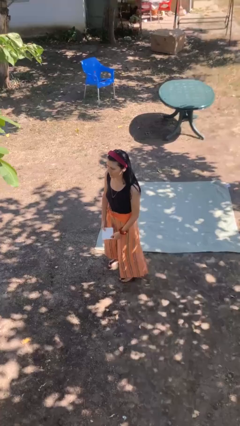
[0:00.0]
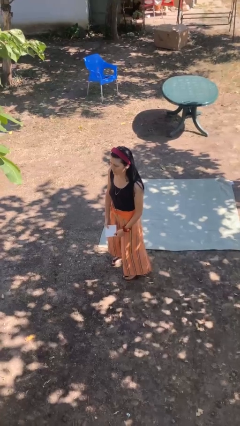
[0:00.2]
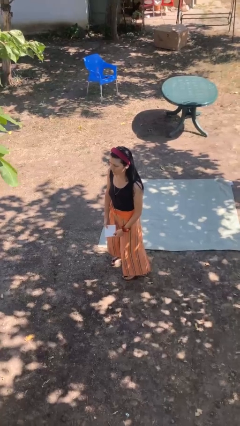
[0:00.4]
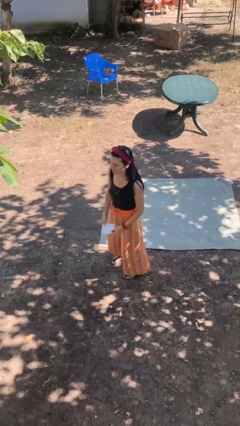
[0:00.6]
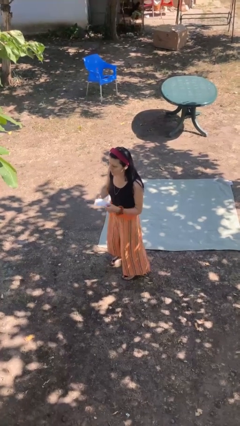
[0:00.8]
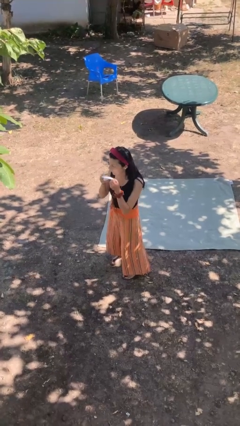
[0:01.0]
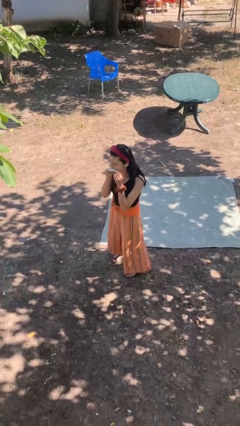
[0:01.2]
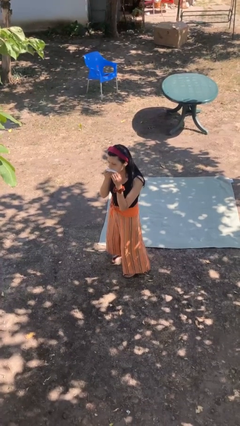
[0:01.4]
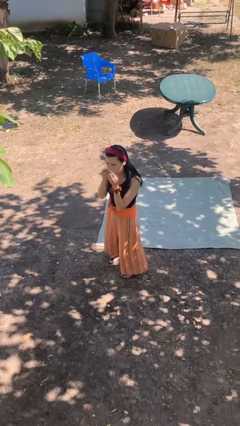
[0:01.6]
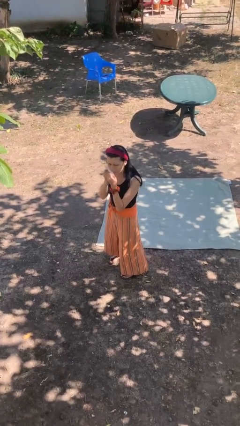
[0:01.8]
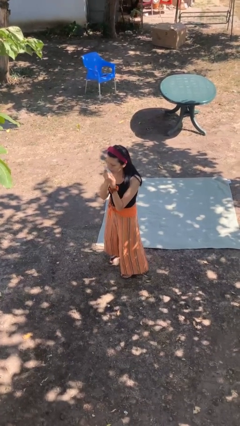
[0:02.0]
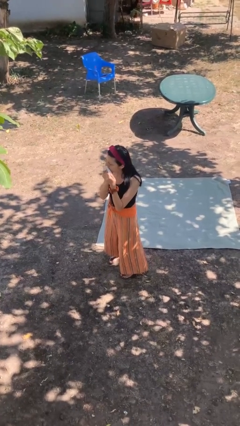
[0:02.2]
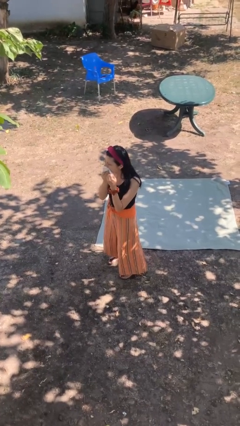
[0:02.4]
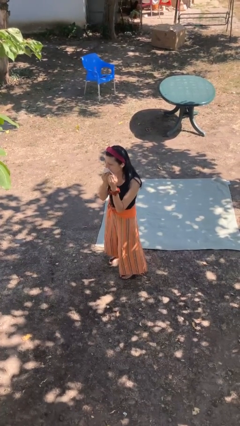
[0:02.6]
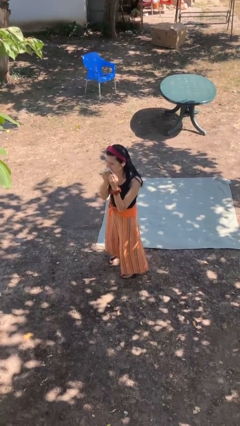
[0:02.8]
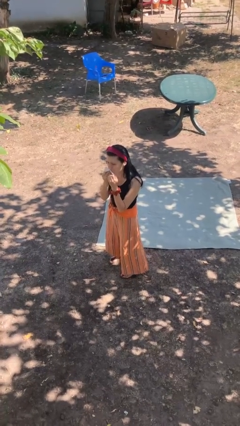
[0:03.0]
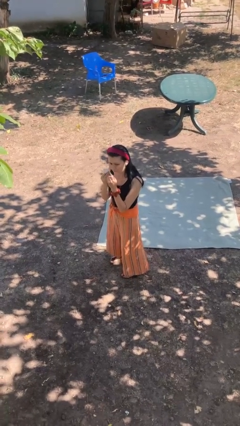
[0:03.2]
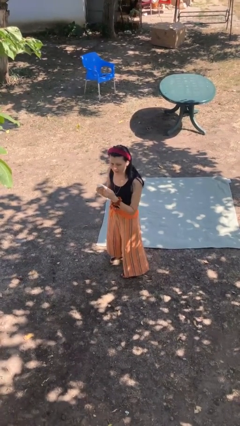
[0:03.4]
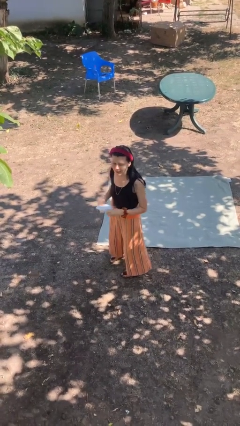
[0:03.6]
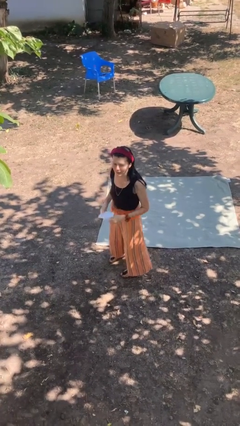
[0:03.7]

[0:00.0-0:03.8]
person wipes mouth with napkin

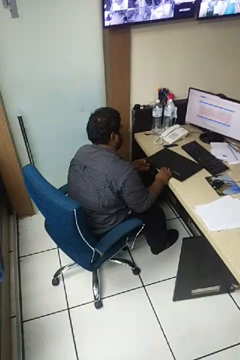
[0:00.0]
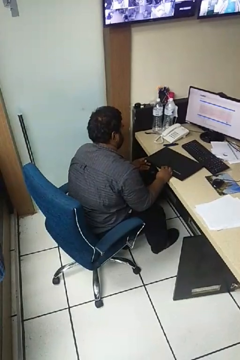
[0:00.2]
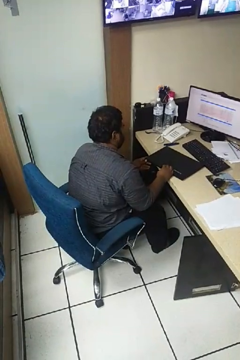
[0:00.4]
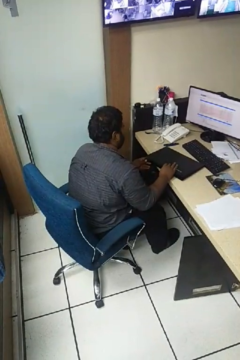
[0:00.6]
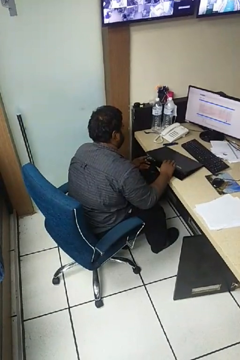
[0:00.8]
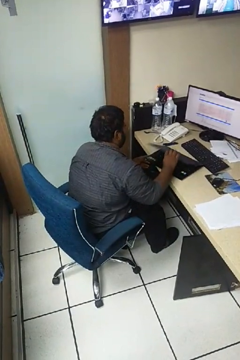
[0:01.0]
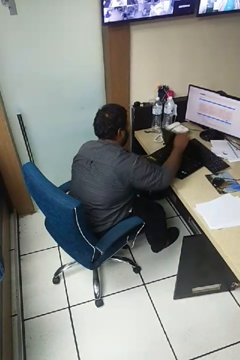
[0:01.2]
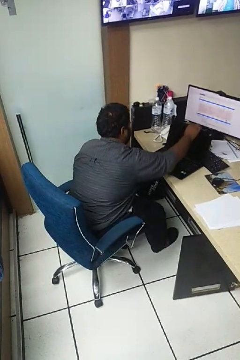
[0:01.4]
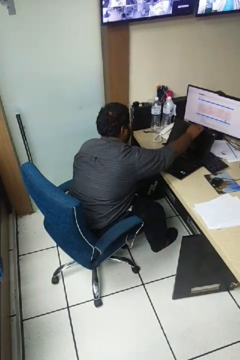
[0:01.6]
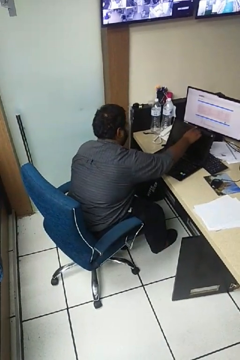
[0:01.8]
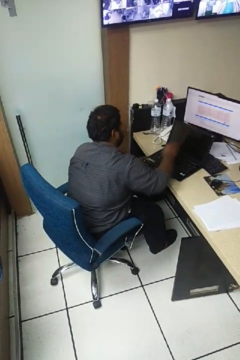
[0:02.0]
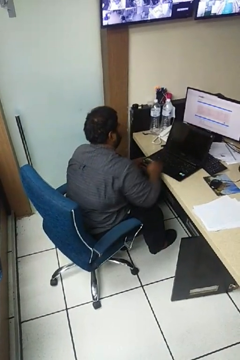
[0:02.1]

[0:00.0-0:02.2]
person opens laptop

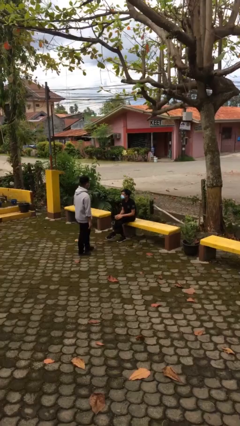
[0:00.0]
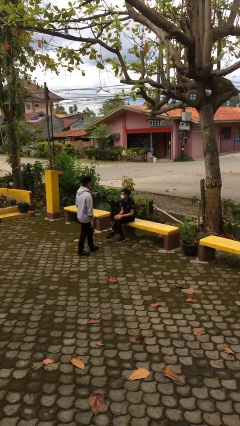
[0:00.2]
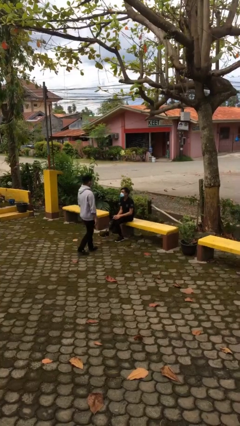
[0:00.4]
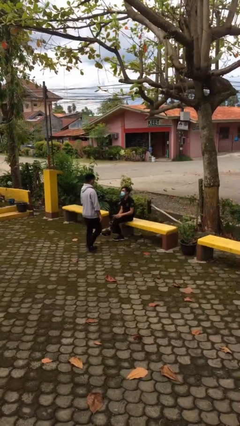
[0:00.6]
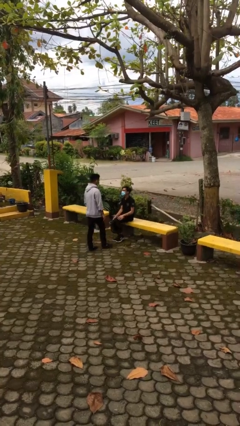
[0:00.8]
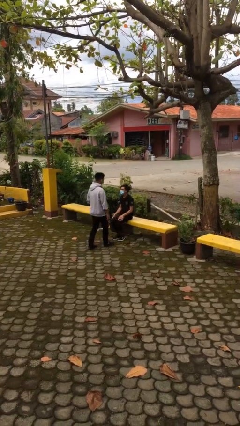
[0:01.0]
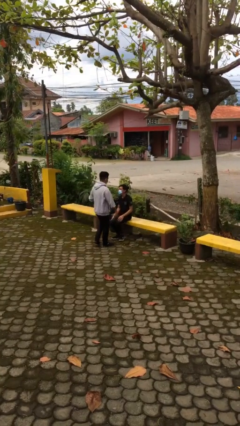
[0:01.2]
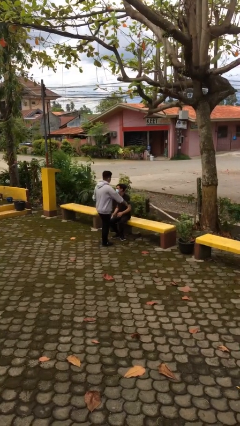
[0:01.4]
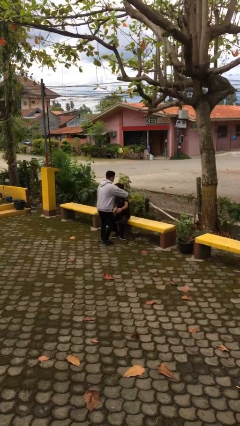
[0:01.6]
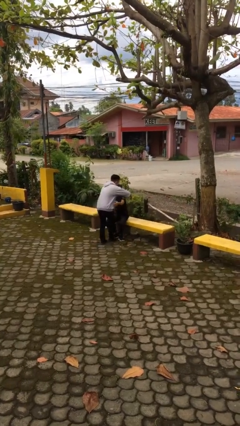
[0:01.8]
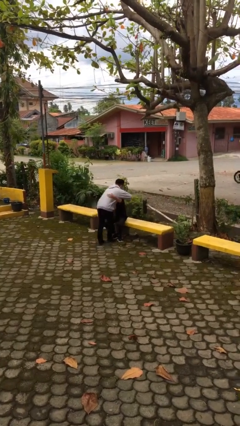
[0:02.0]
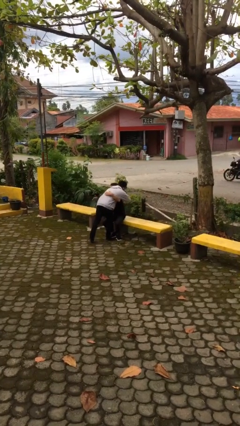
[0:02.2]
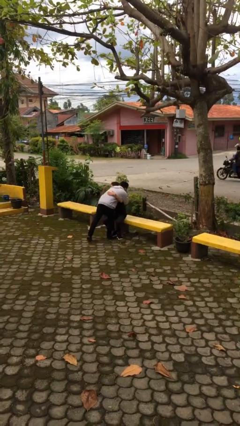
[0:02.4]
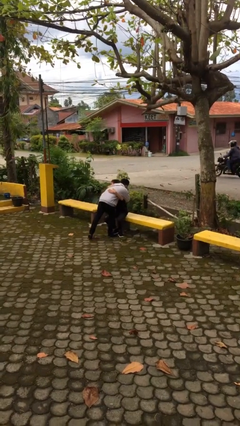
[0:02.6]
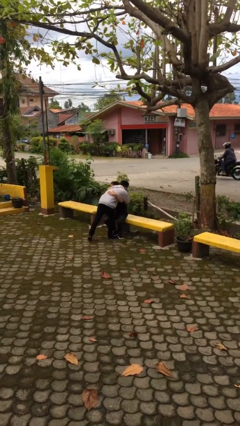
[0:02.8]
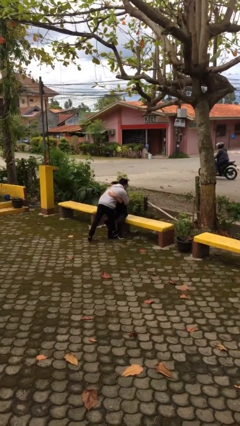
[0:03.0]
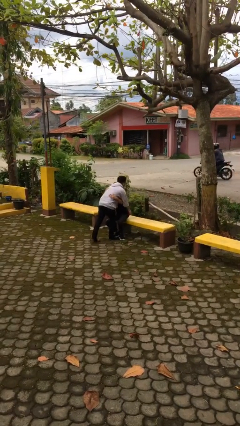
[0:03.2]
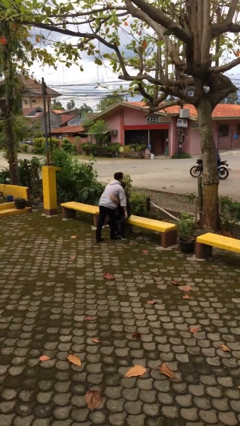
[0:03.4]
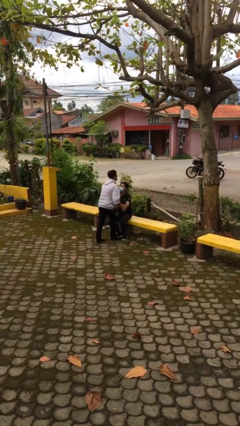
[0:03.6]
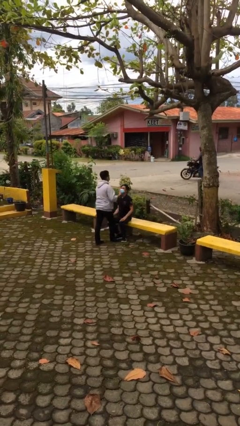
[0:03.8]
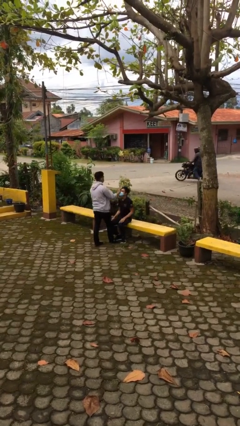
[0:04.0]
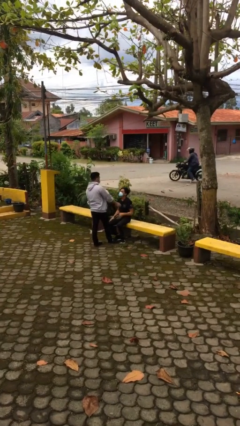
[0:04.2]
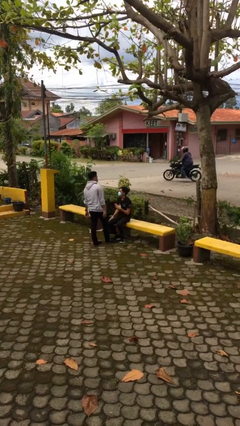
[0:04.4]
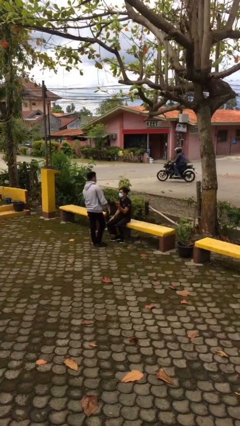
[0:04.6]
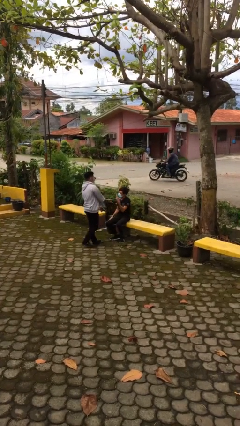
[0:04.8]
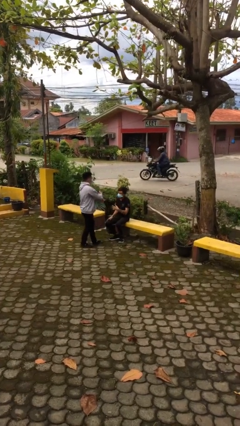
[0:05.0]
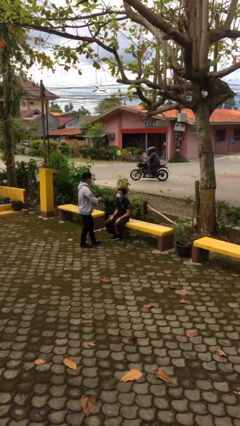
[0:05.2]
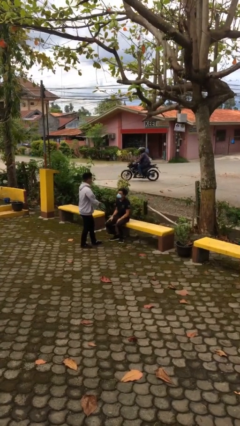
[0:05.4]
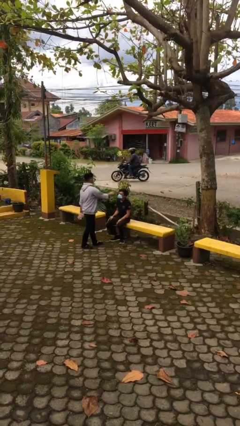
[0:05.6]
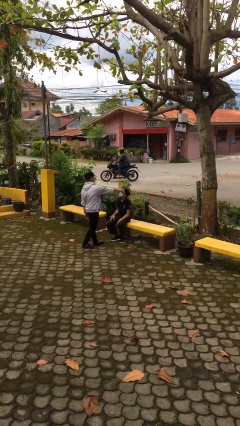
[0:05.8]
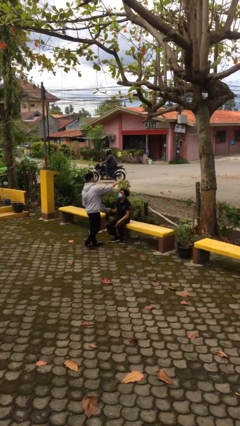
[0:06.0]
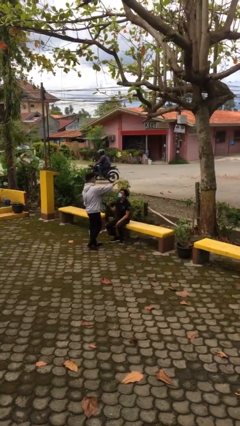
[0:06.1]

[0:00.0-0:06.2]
person embraces person

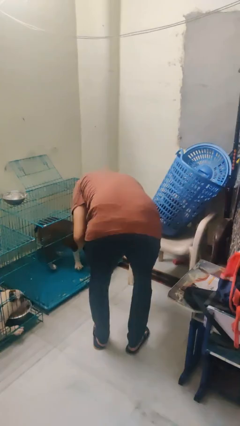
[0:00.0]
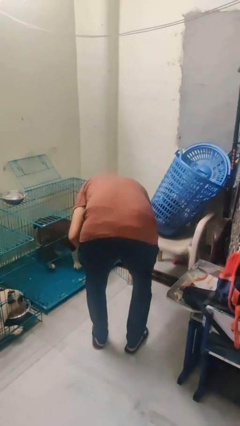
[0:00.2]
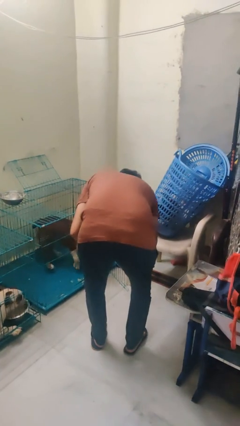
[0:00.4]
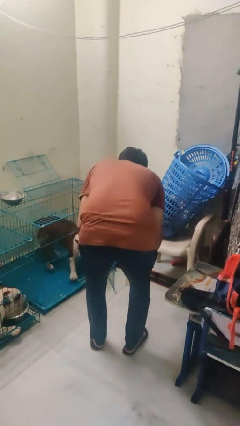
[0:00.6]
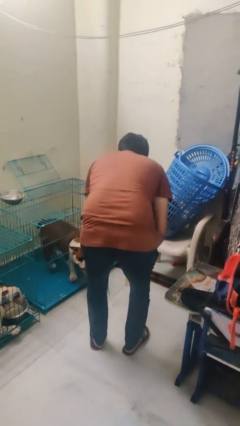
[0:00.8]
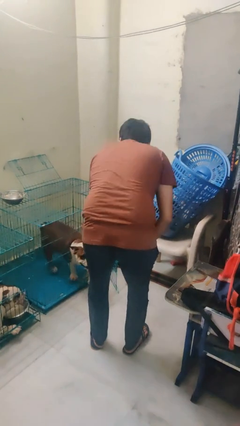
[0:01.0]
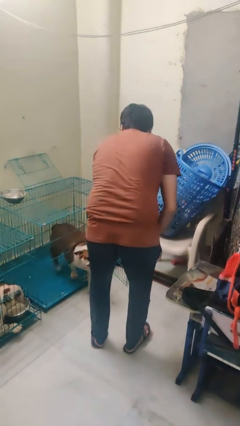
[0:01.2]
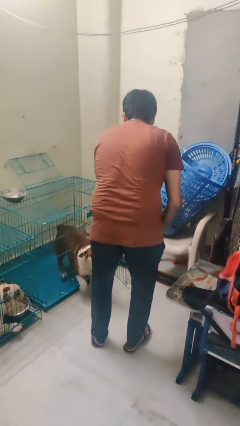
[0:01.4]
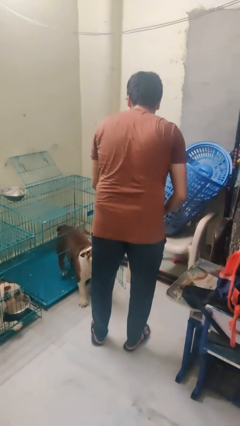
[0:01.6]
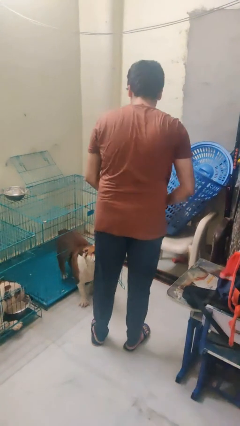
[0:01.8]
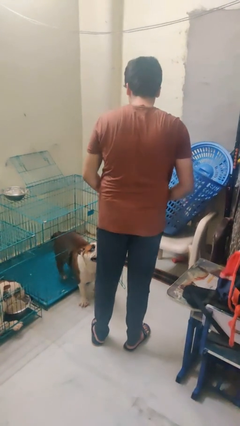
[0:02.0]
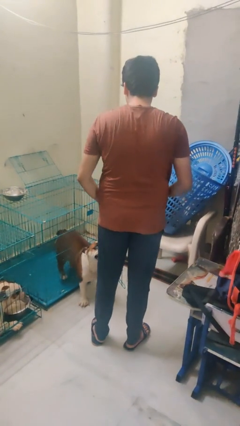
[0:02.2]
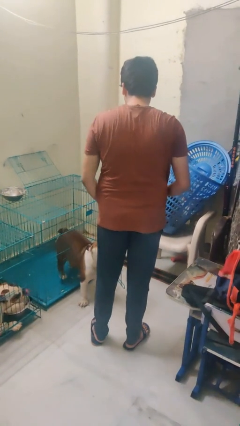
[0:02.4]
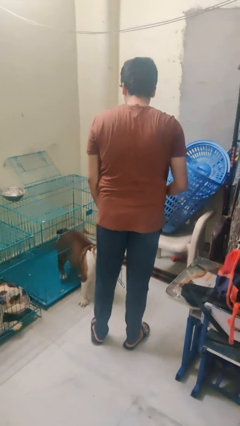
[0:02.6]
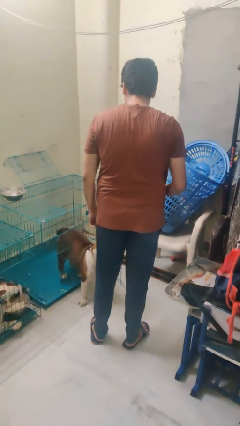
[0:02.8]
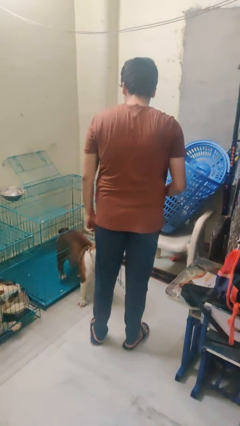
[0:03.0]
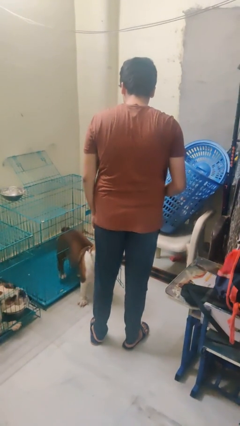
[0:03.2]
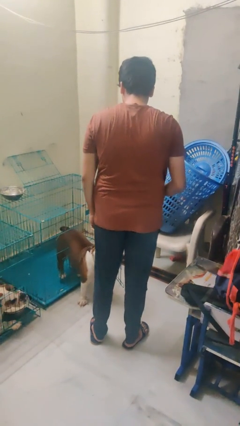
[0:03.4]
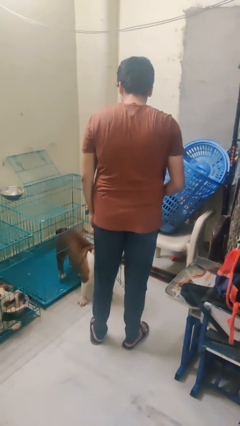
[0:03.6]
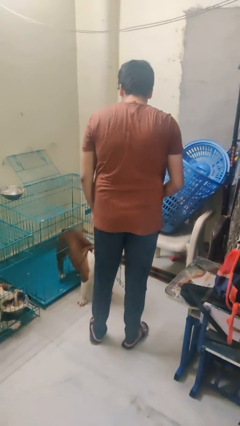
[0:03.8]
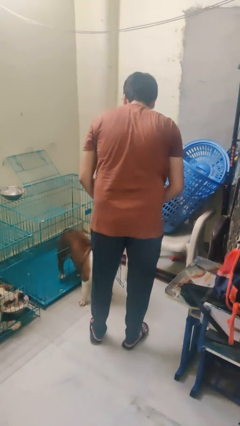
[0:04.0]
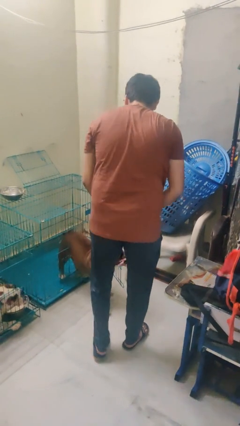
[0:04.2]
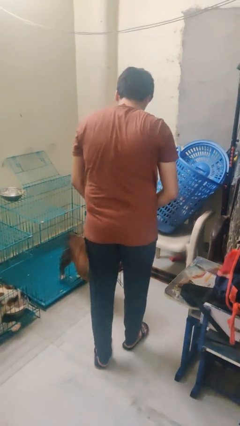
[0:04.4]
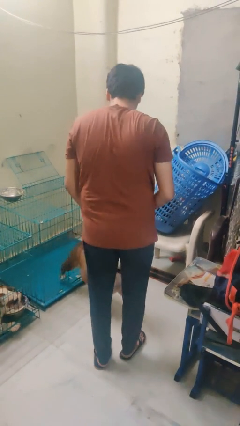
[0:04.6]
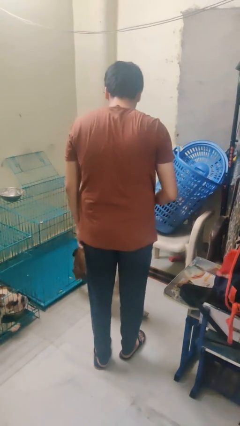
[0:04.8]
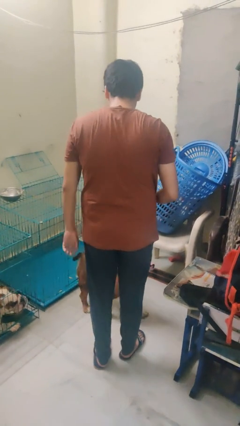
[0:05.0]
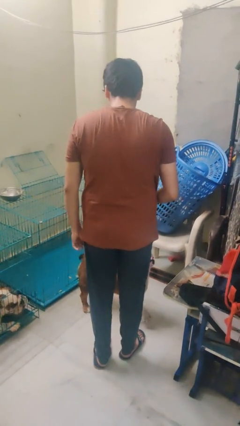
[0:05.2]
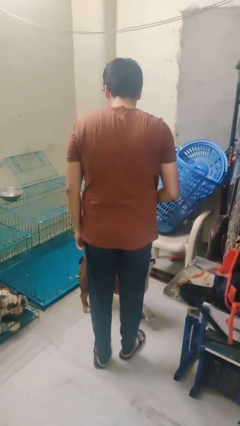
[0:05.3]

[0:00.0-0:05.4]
person uncrates dog
